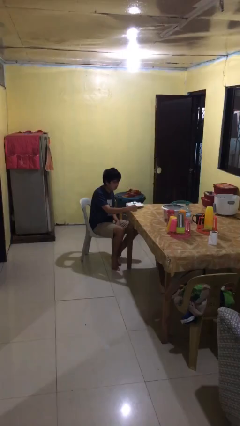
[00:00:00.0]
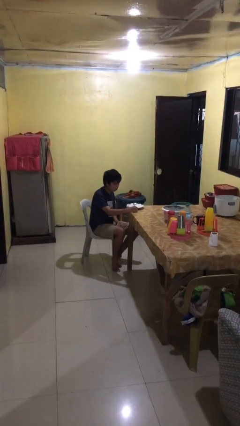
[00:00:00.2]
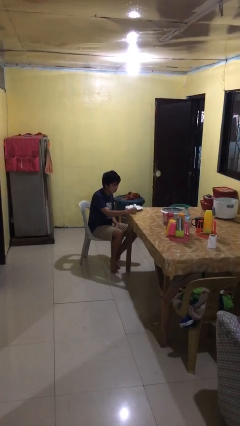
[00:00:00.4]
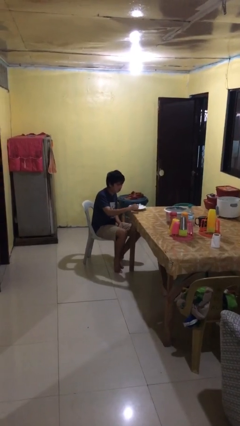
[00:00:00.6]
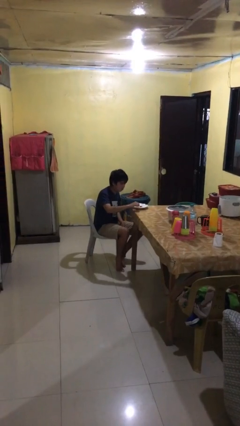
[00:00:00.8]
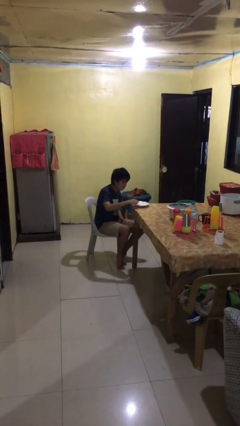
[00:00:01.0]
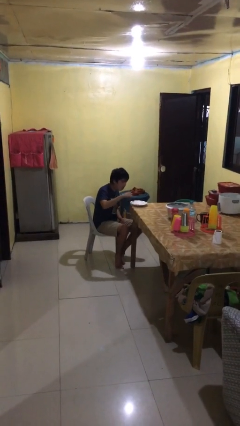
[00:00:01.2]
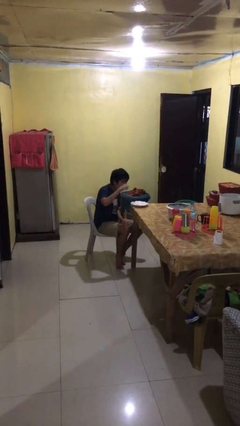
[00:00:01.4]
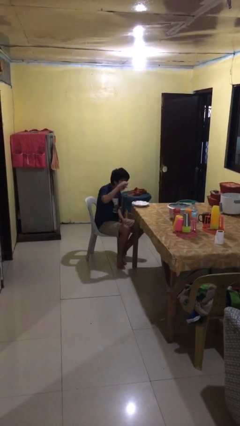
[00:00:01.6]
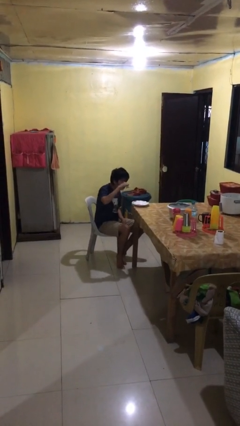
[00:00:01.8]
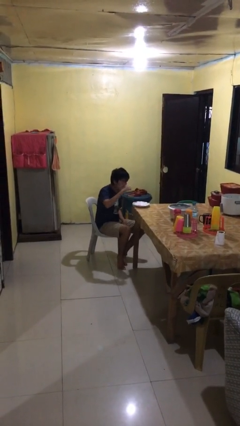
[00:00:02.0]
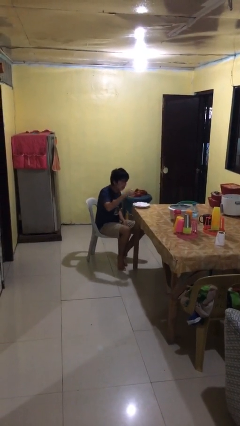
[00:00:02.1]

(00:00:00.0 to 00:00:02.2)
person eats with utensil

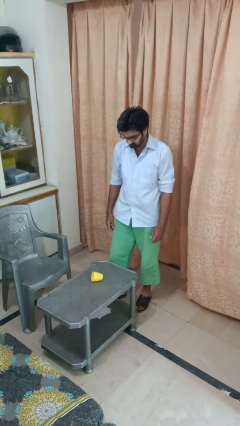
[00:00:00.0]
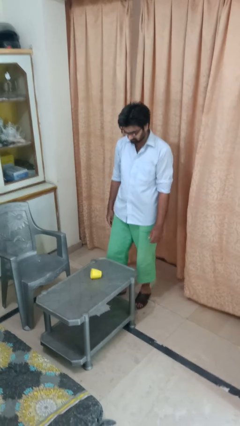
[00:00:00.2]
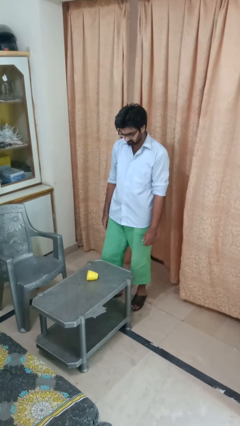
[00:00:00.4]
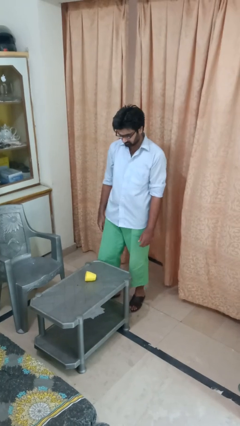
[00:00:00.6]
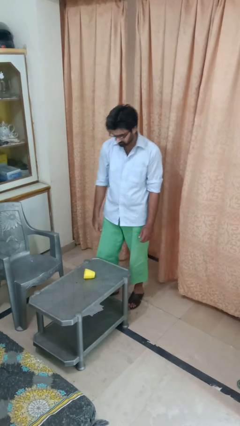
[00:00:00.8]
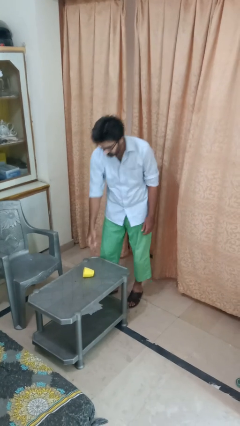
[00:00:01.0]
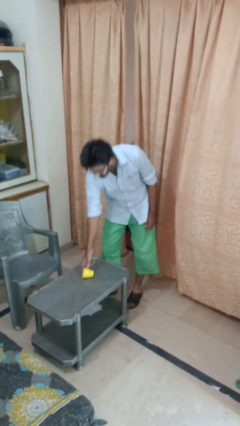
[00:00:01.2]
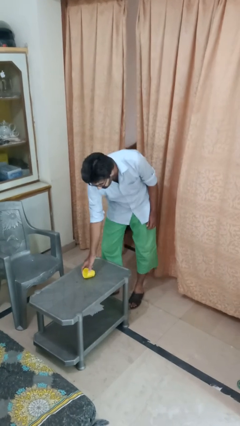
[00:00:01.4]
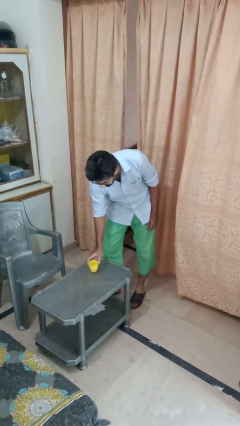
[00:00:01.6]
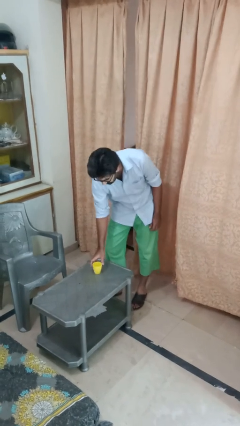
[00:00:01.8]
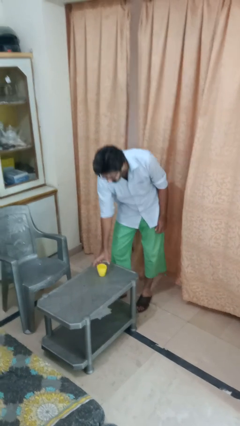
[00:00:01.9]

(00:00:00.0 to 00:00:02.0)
person sets upright glass

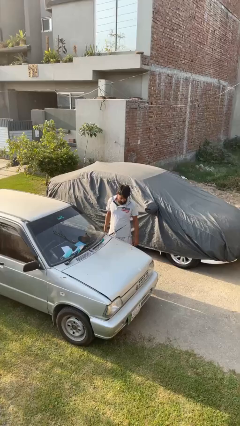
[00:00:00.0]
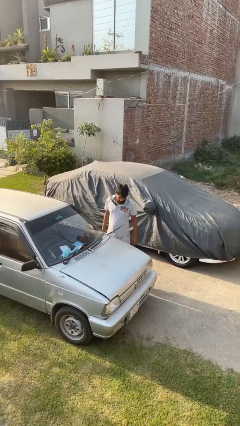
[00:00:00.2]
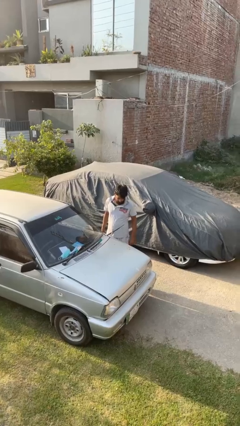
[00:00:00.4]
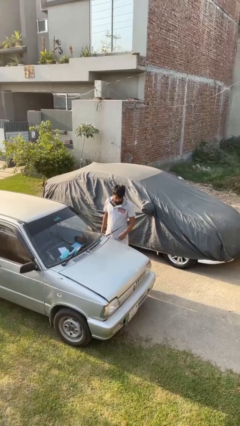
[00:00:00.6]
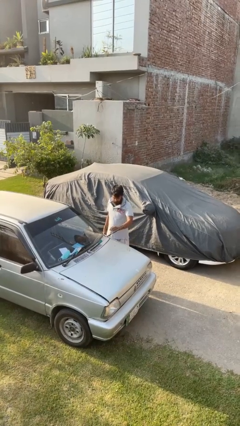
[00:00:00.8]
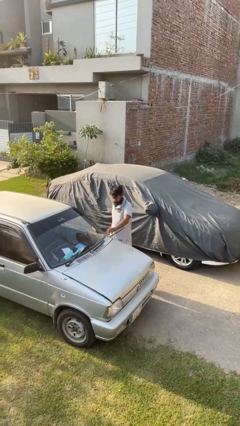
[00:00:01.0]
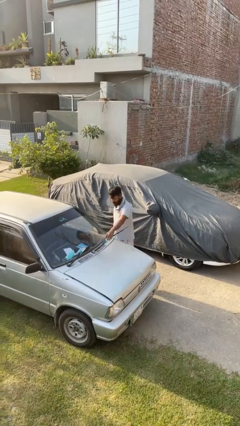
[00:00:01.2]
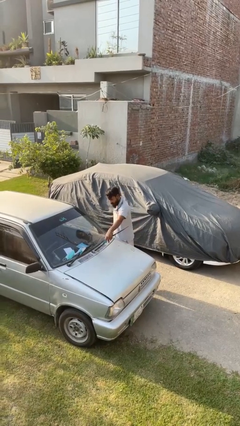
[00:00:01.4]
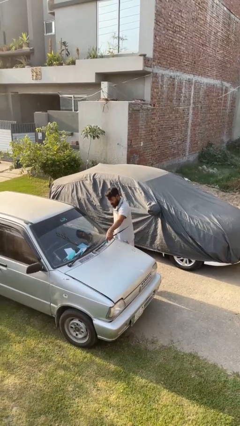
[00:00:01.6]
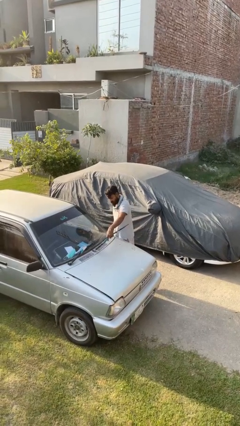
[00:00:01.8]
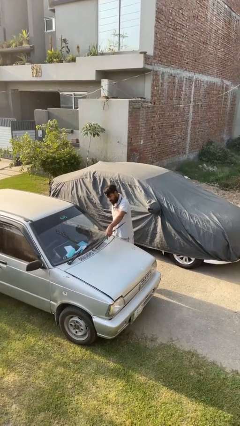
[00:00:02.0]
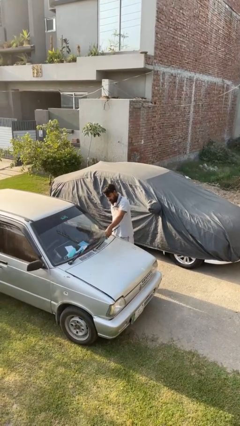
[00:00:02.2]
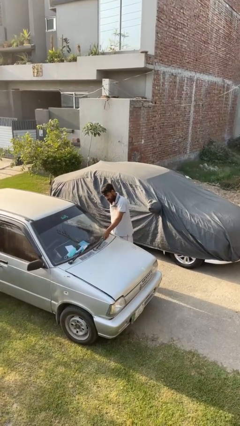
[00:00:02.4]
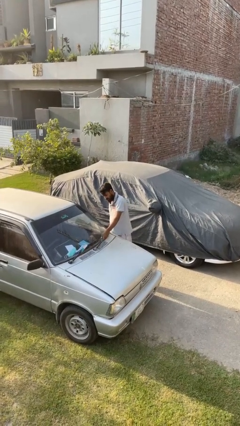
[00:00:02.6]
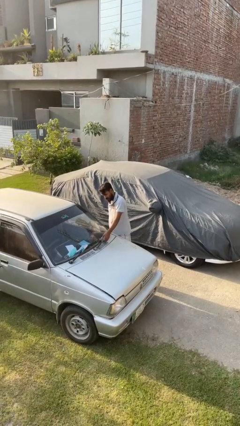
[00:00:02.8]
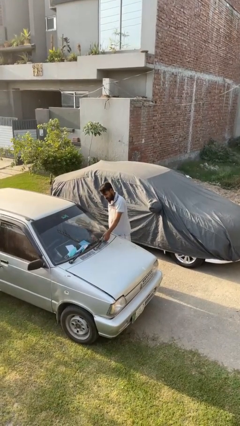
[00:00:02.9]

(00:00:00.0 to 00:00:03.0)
person flips down car wipers

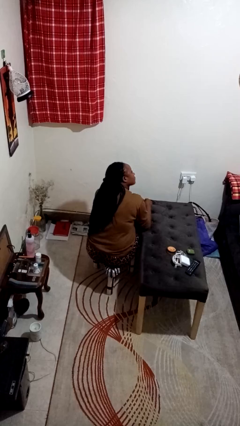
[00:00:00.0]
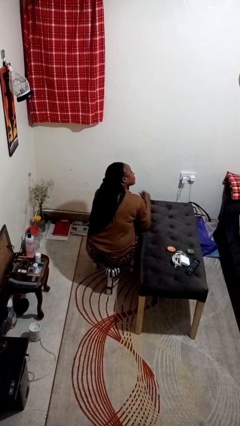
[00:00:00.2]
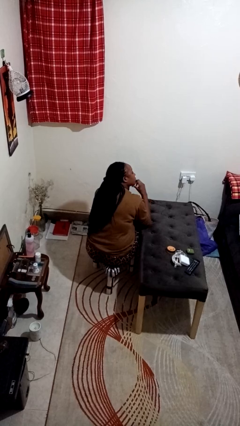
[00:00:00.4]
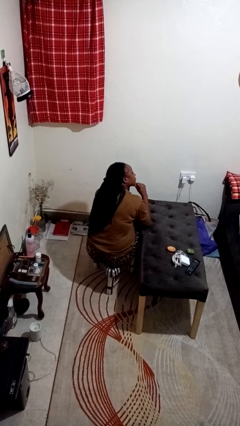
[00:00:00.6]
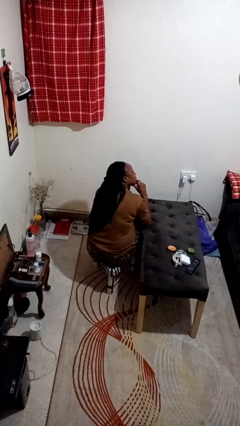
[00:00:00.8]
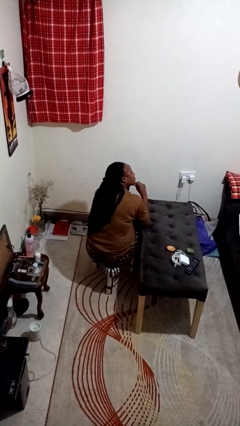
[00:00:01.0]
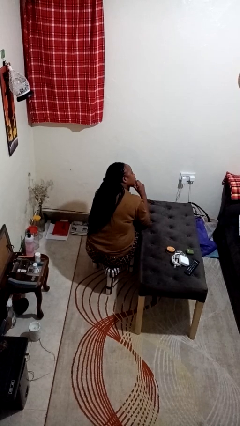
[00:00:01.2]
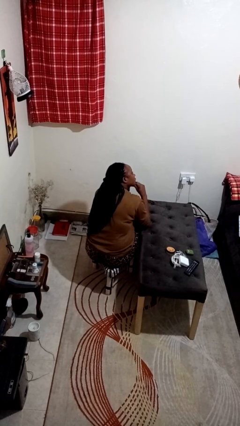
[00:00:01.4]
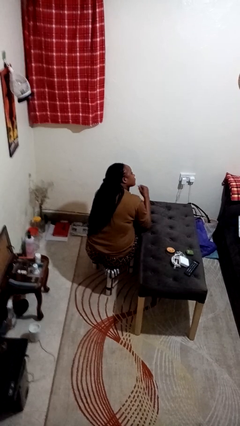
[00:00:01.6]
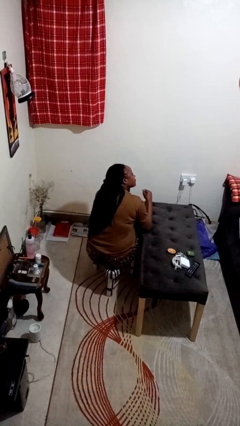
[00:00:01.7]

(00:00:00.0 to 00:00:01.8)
person strokes chin

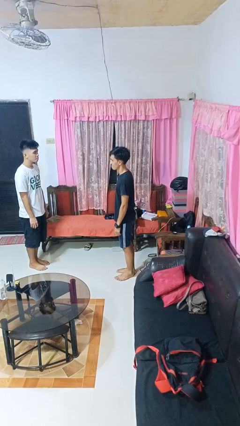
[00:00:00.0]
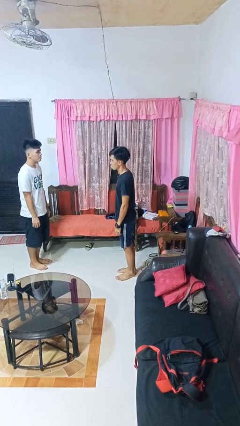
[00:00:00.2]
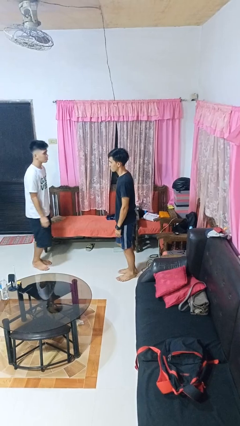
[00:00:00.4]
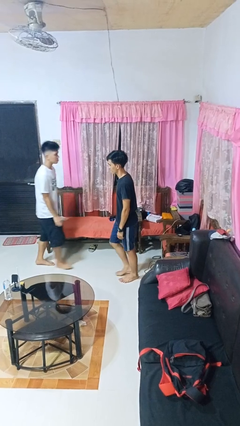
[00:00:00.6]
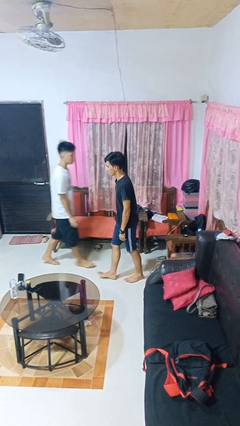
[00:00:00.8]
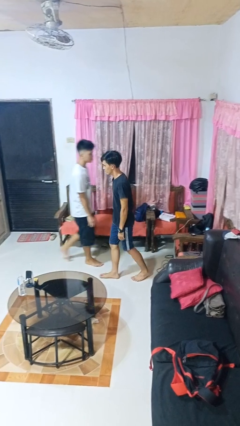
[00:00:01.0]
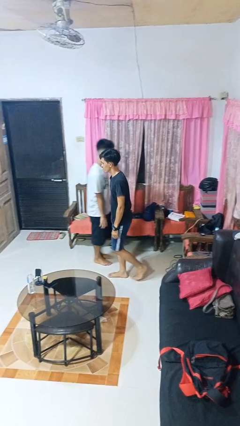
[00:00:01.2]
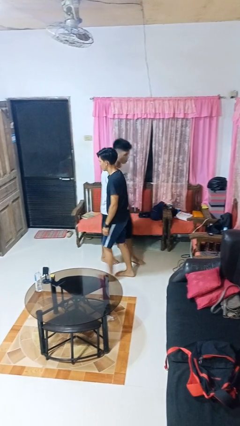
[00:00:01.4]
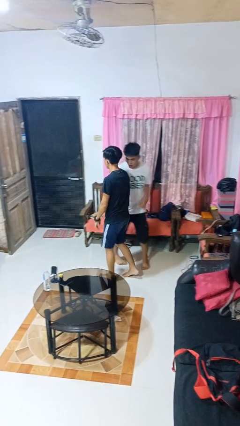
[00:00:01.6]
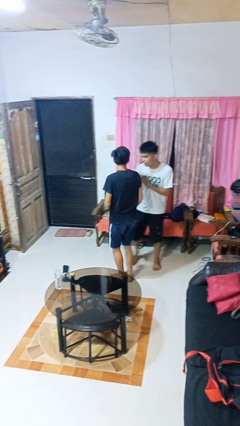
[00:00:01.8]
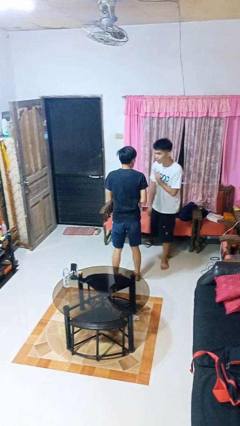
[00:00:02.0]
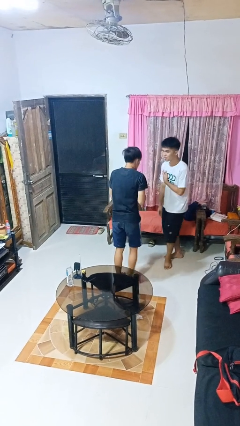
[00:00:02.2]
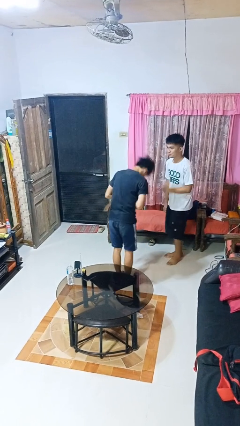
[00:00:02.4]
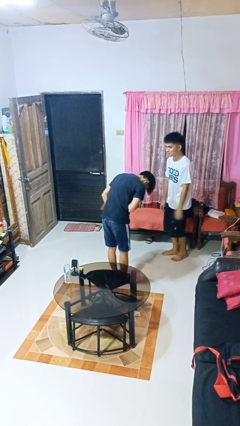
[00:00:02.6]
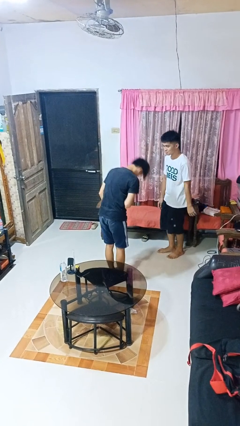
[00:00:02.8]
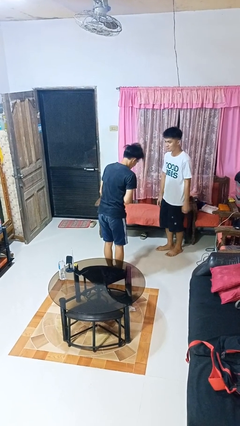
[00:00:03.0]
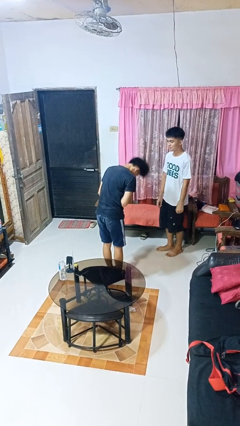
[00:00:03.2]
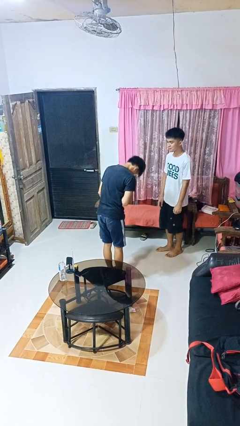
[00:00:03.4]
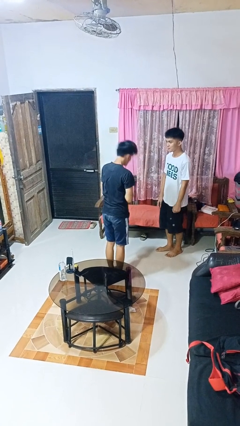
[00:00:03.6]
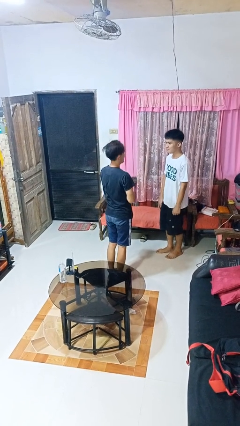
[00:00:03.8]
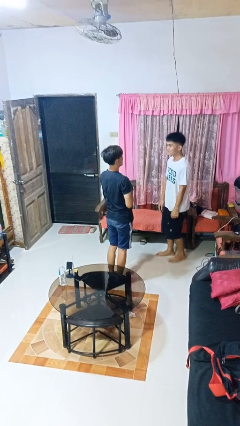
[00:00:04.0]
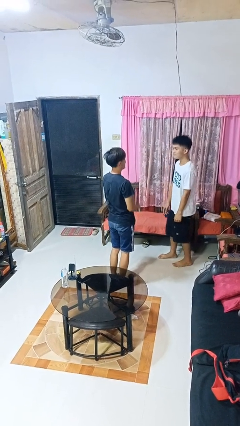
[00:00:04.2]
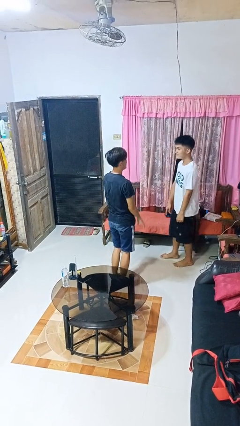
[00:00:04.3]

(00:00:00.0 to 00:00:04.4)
person bumps into person

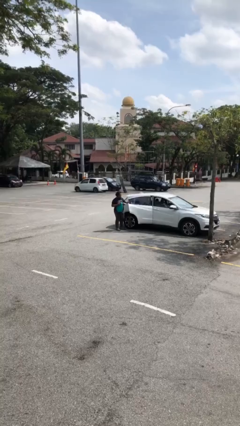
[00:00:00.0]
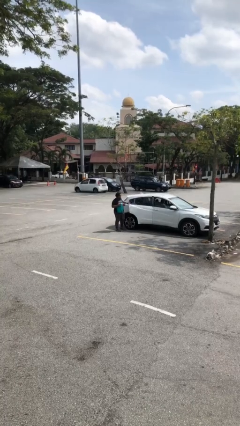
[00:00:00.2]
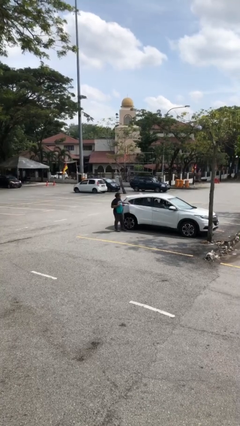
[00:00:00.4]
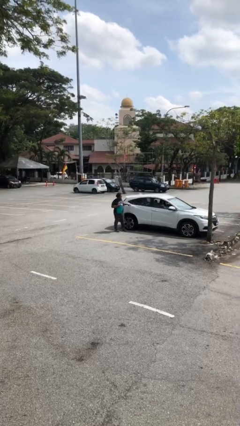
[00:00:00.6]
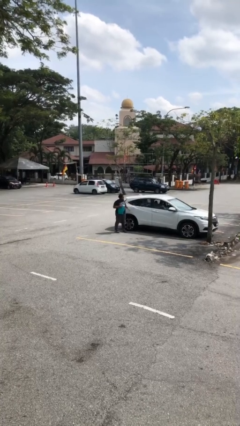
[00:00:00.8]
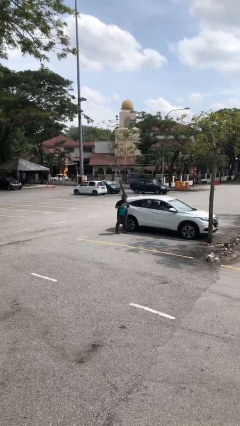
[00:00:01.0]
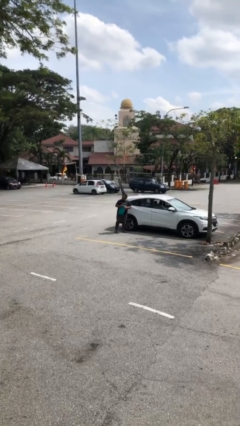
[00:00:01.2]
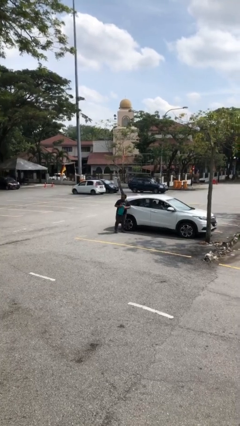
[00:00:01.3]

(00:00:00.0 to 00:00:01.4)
person closes car door

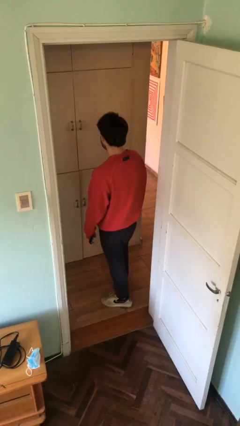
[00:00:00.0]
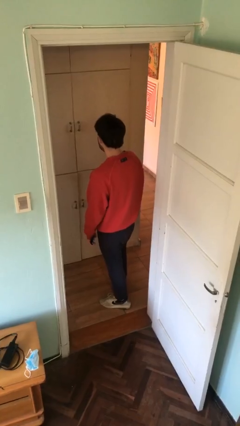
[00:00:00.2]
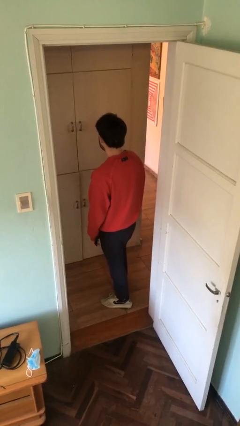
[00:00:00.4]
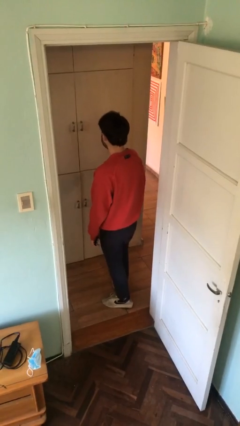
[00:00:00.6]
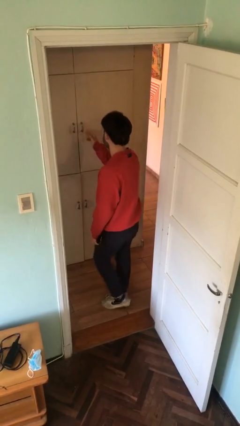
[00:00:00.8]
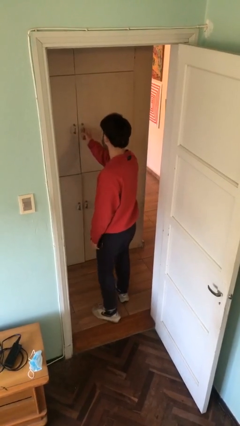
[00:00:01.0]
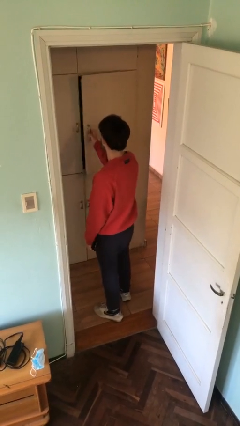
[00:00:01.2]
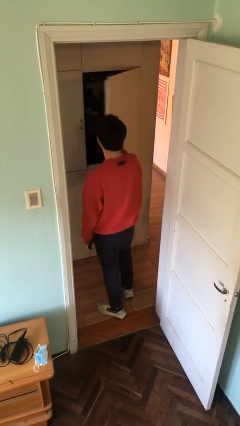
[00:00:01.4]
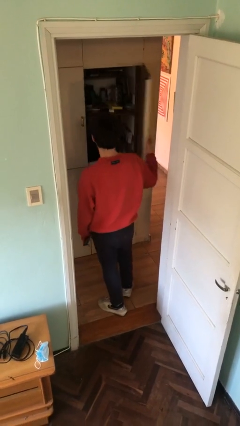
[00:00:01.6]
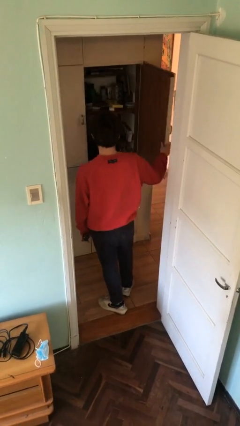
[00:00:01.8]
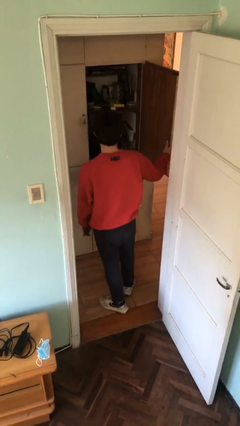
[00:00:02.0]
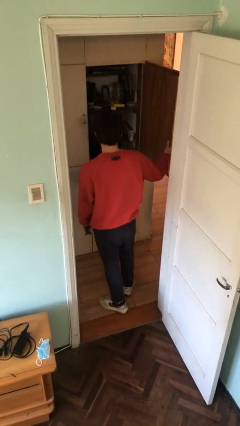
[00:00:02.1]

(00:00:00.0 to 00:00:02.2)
person opens closet door
